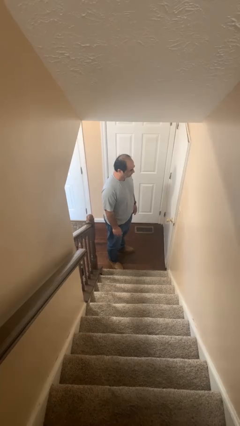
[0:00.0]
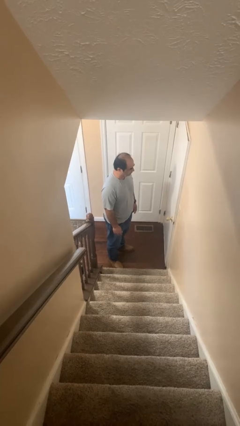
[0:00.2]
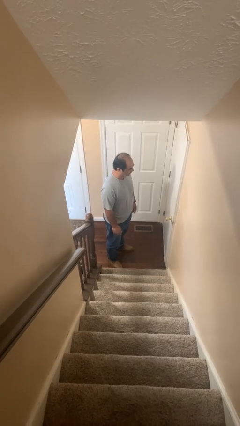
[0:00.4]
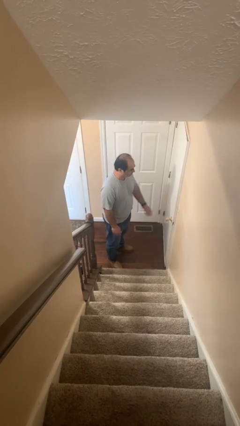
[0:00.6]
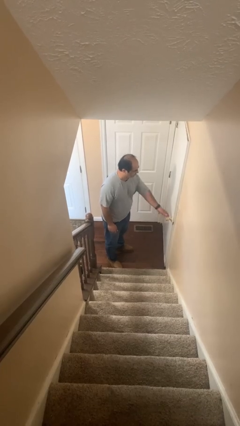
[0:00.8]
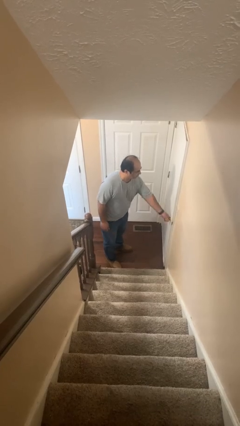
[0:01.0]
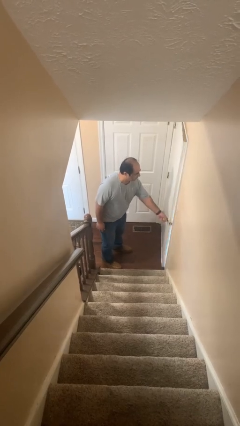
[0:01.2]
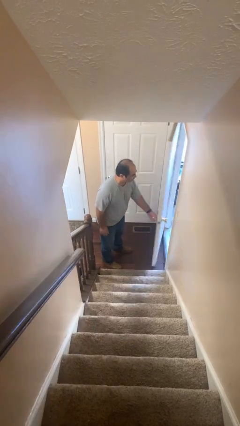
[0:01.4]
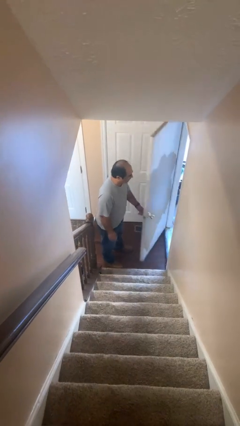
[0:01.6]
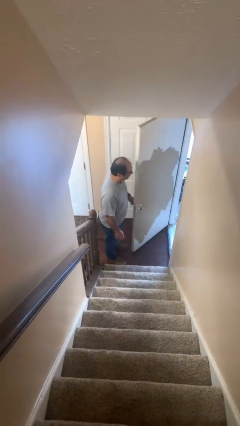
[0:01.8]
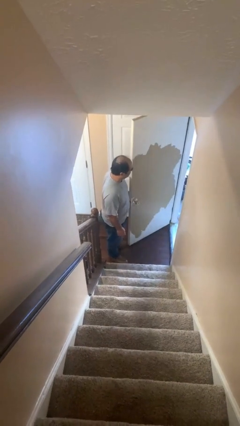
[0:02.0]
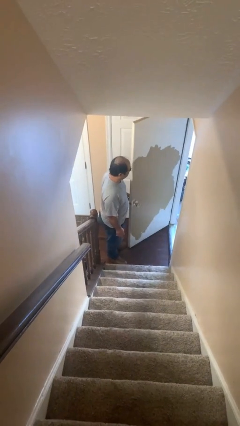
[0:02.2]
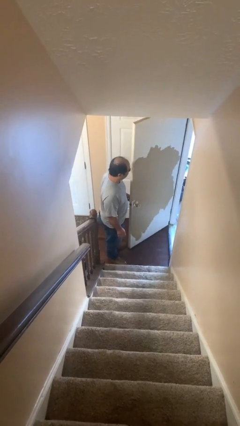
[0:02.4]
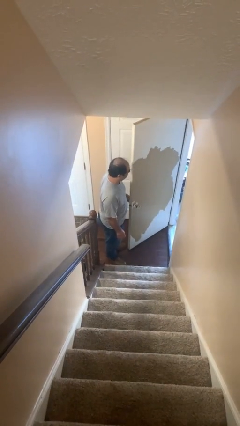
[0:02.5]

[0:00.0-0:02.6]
person opens facility door

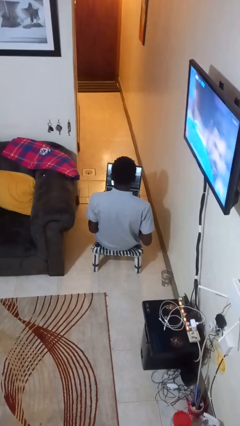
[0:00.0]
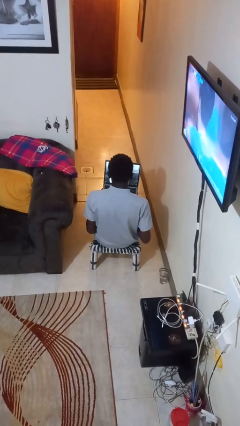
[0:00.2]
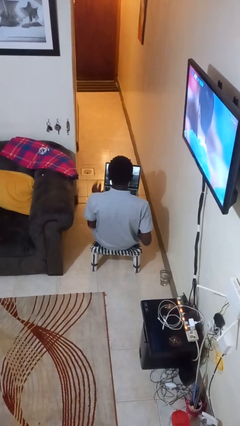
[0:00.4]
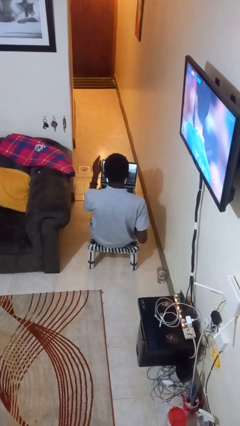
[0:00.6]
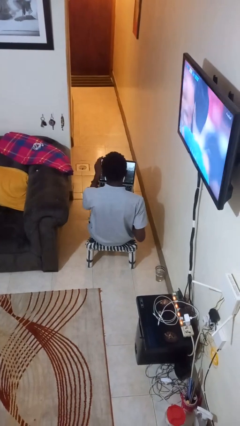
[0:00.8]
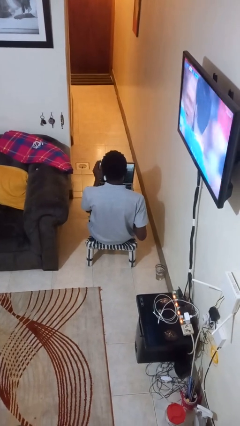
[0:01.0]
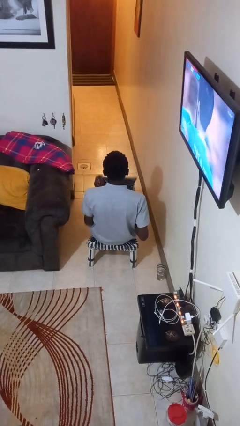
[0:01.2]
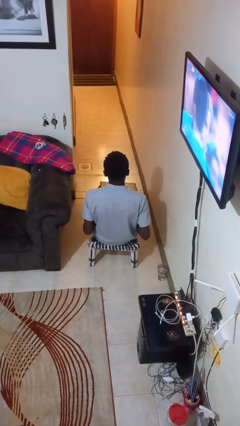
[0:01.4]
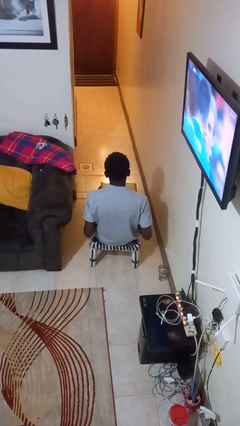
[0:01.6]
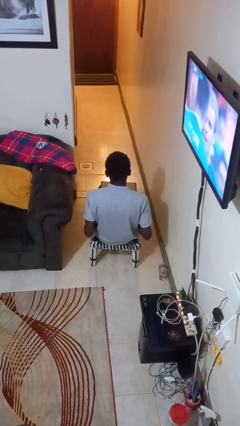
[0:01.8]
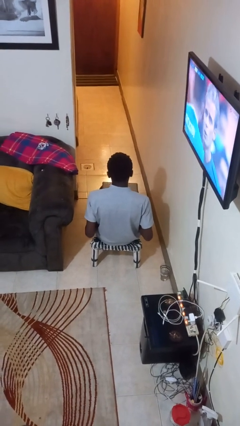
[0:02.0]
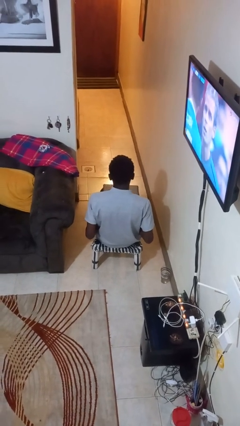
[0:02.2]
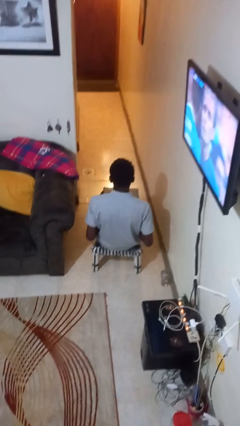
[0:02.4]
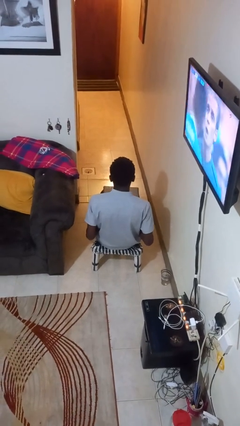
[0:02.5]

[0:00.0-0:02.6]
person closes laptop

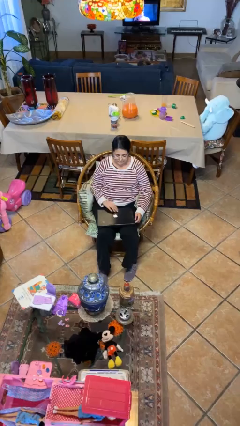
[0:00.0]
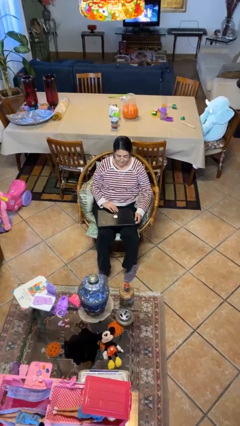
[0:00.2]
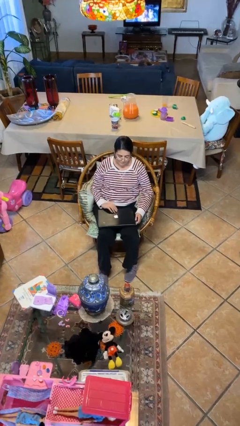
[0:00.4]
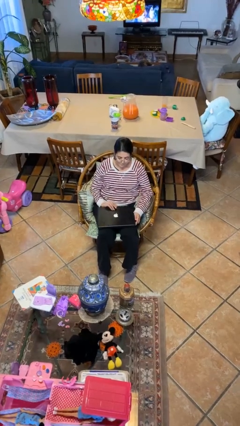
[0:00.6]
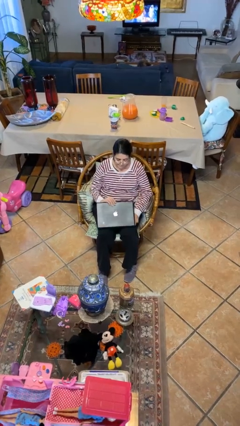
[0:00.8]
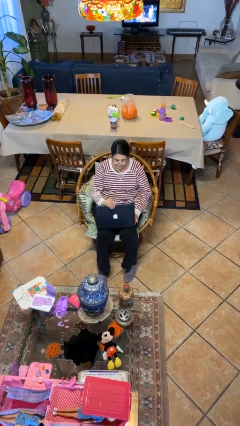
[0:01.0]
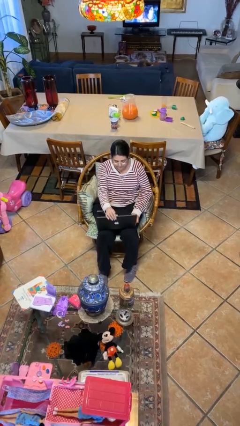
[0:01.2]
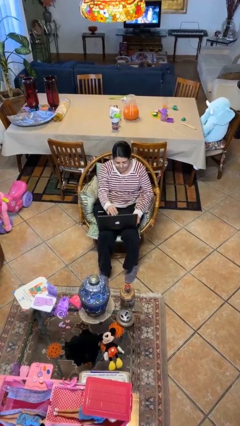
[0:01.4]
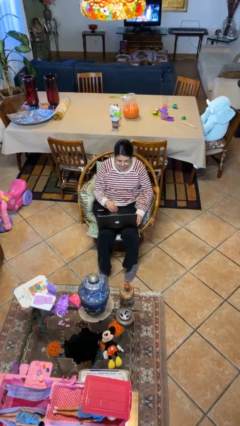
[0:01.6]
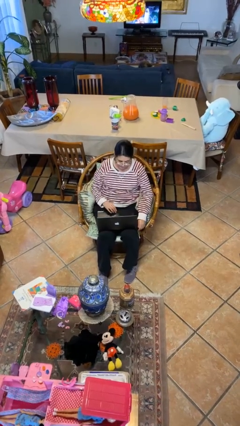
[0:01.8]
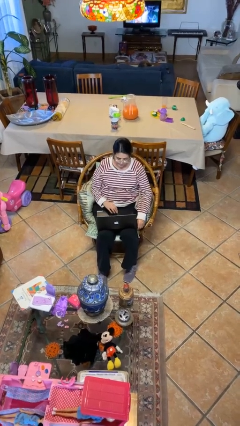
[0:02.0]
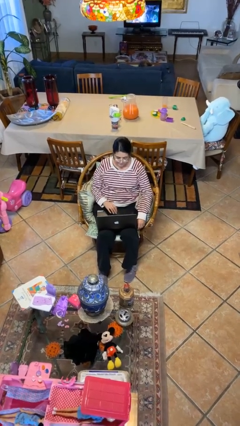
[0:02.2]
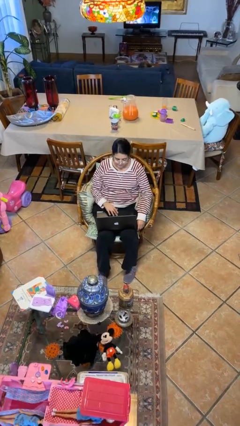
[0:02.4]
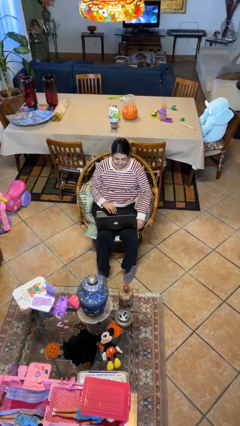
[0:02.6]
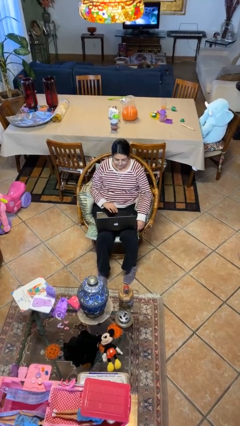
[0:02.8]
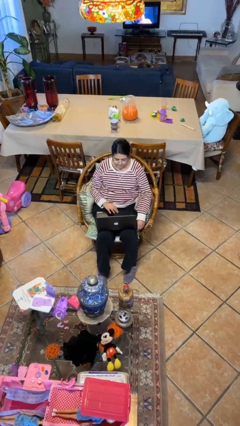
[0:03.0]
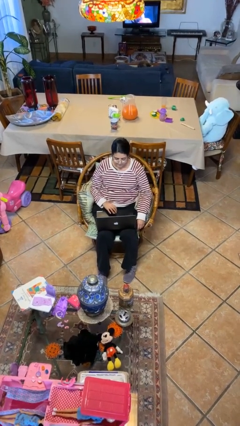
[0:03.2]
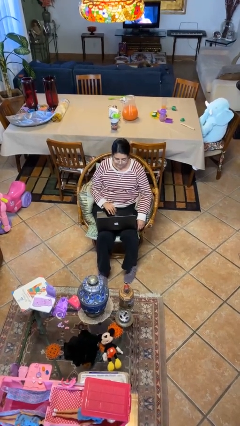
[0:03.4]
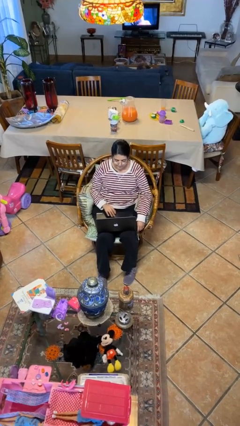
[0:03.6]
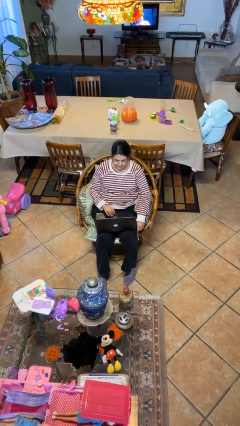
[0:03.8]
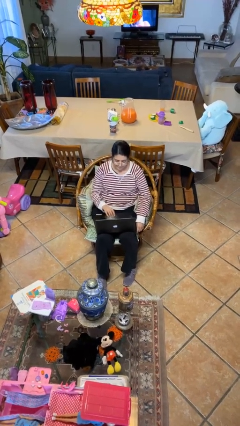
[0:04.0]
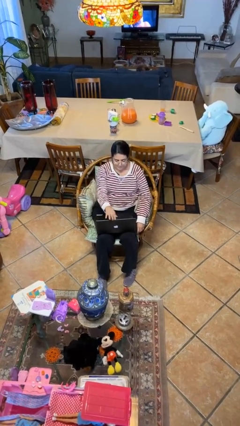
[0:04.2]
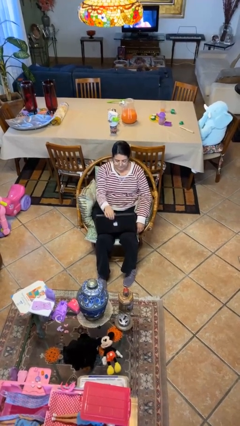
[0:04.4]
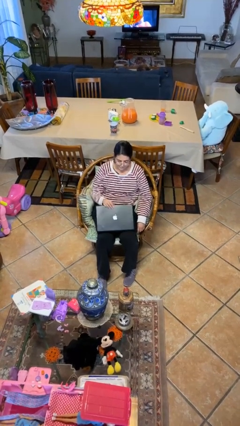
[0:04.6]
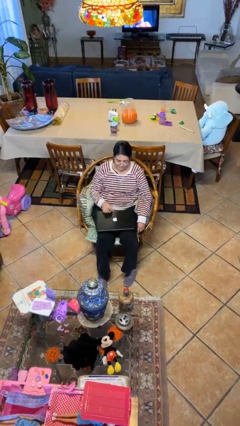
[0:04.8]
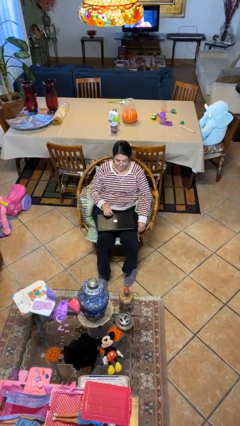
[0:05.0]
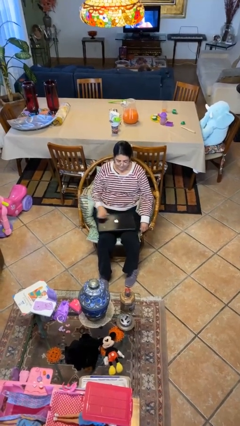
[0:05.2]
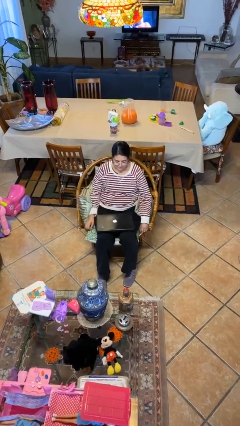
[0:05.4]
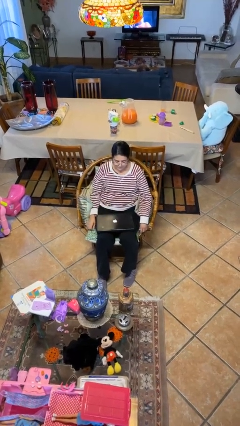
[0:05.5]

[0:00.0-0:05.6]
person interacts with laptop

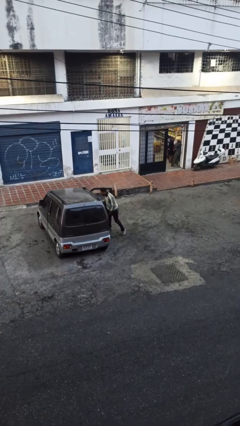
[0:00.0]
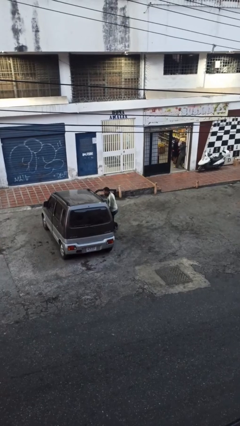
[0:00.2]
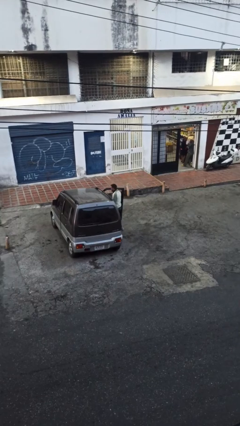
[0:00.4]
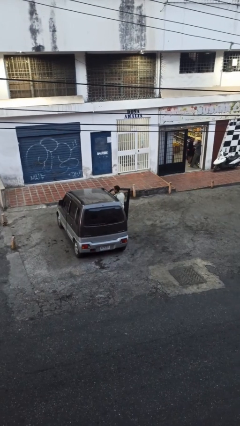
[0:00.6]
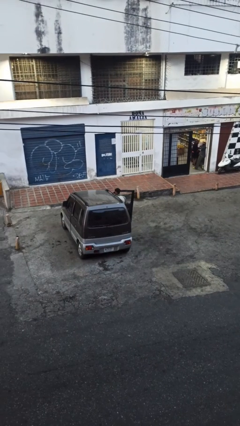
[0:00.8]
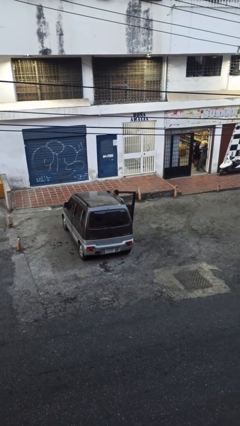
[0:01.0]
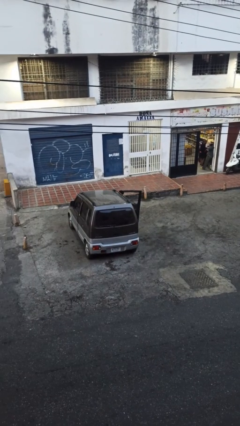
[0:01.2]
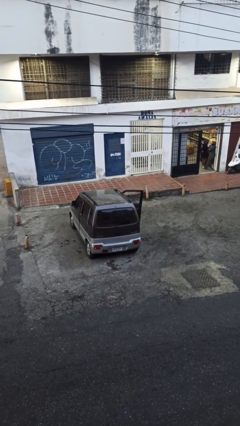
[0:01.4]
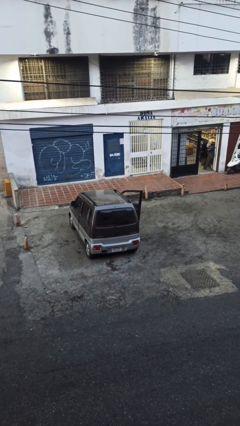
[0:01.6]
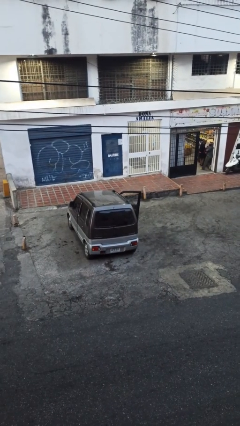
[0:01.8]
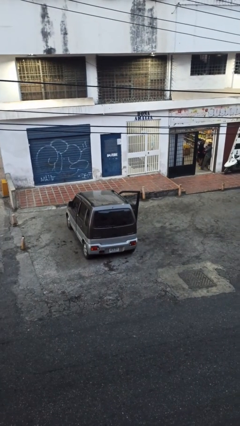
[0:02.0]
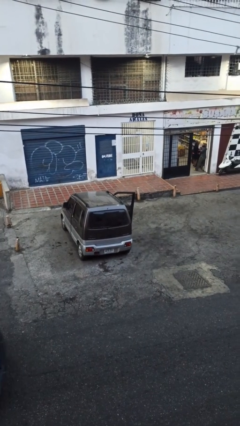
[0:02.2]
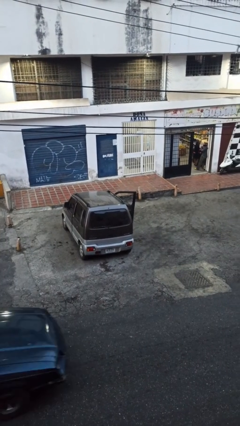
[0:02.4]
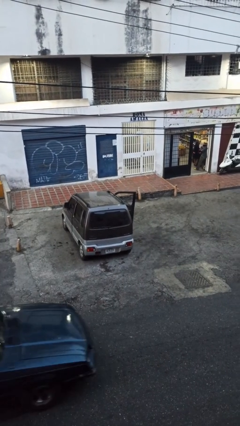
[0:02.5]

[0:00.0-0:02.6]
person enters car

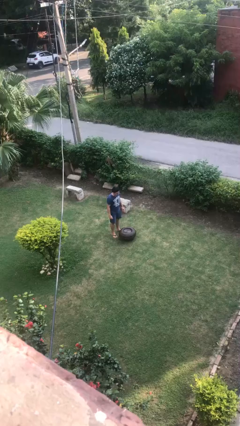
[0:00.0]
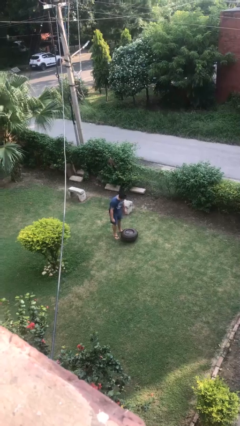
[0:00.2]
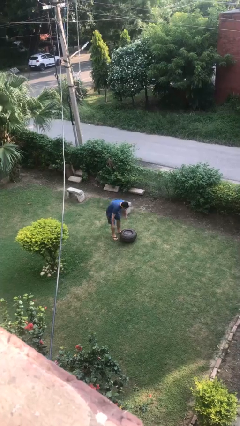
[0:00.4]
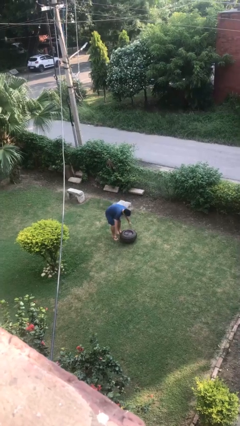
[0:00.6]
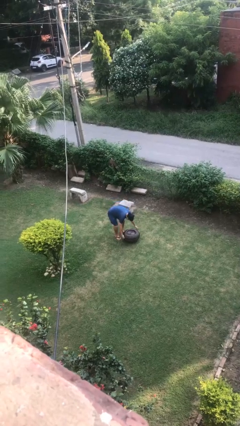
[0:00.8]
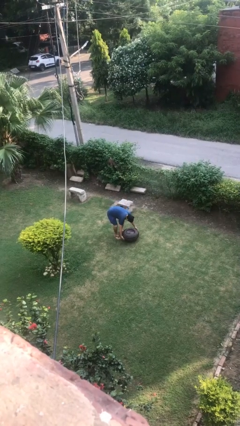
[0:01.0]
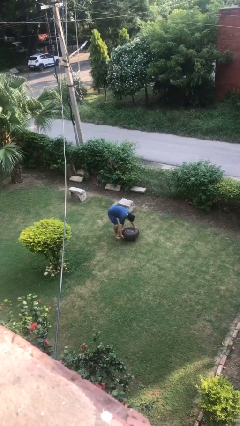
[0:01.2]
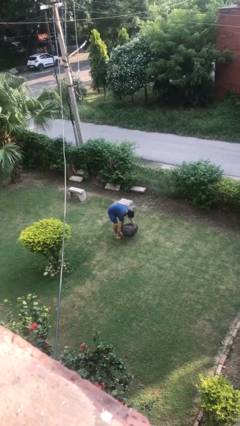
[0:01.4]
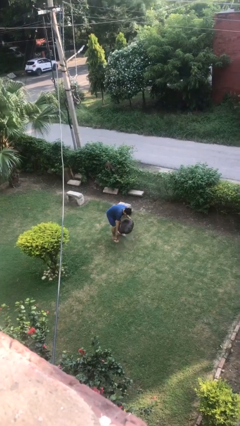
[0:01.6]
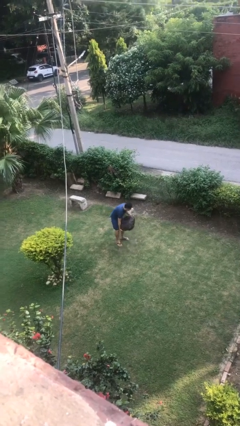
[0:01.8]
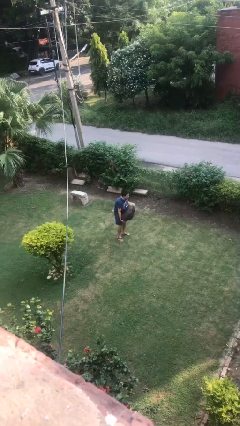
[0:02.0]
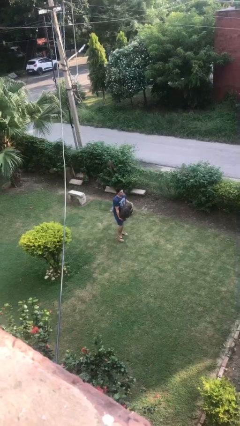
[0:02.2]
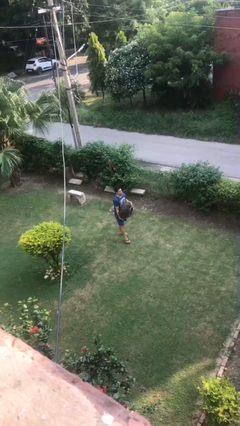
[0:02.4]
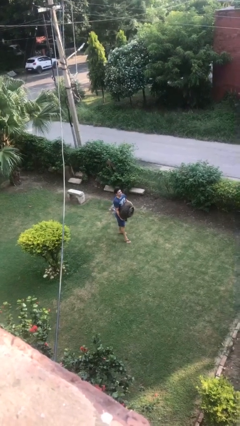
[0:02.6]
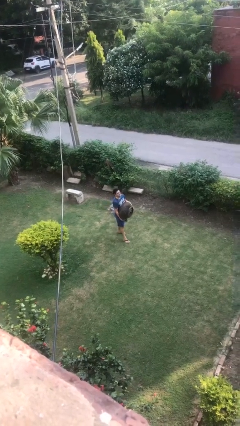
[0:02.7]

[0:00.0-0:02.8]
person picks up object from floor

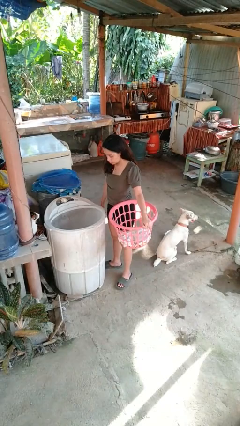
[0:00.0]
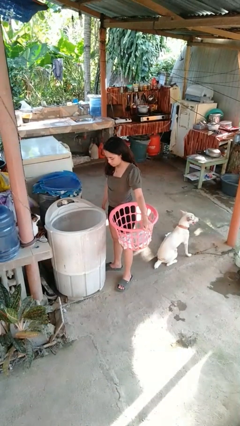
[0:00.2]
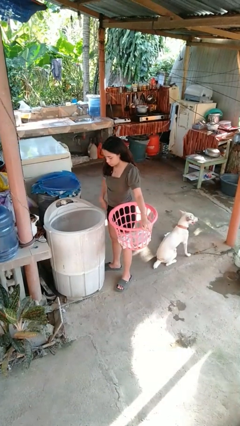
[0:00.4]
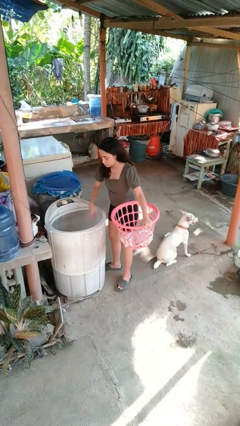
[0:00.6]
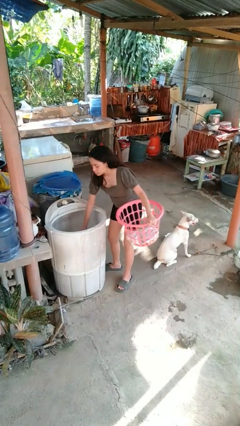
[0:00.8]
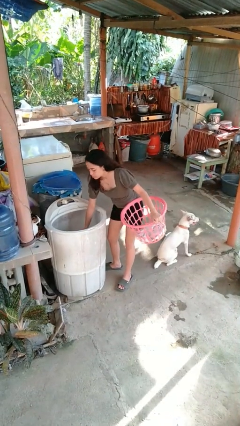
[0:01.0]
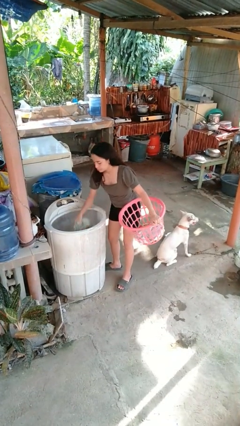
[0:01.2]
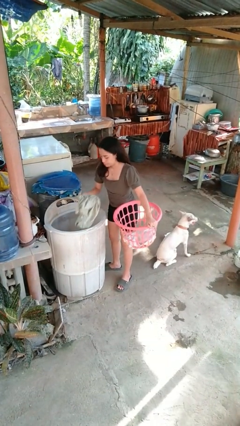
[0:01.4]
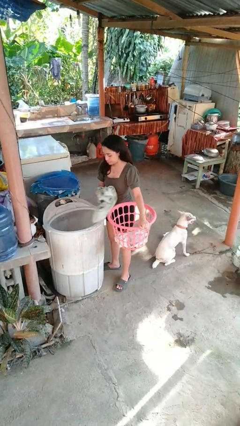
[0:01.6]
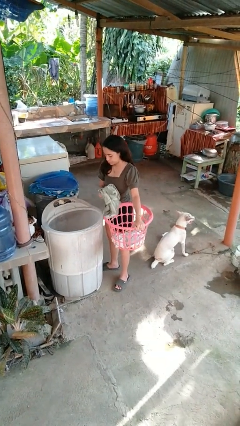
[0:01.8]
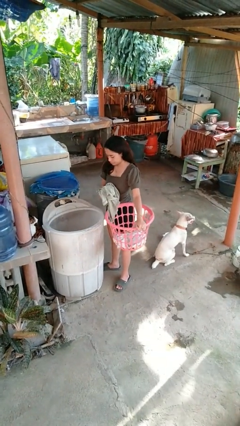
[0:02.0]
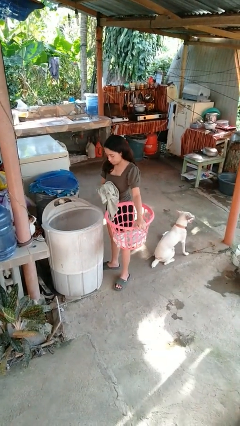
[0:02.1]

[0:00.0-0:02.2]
person unloads dryer
